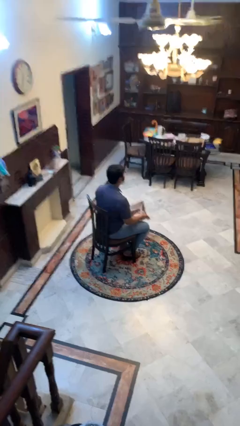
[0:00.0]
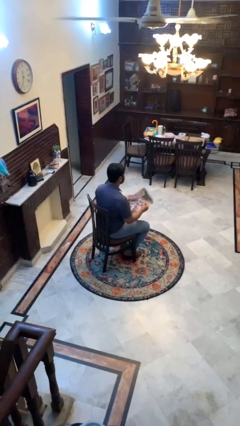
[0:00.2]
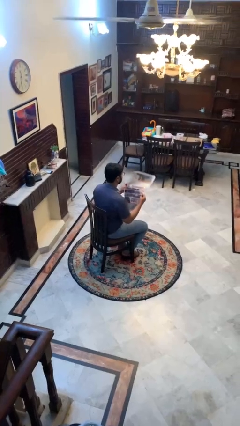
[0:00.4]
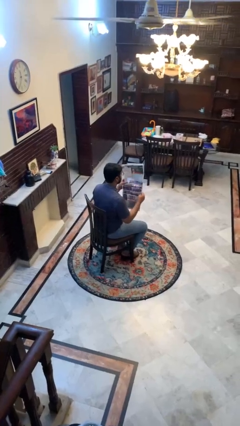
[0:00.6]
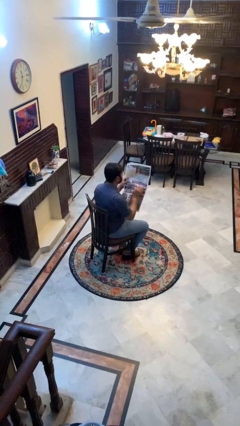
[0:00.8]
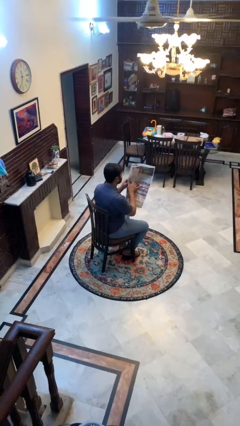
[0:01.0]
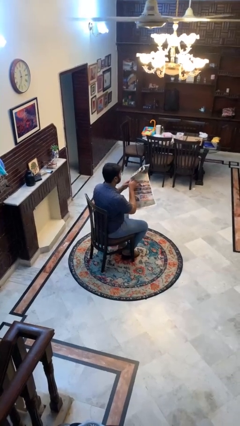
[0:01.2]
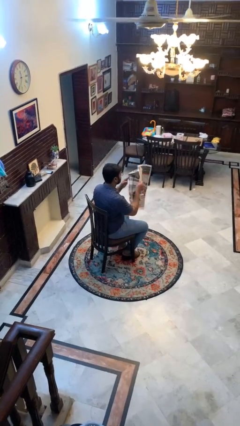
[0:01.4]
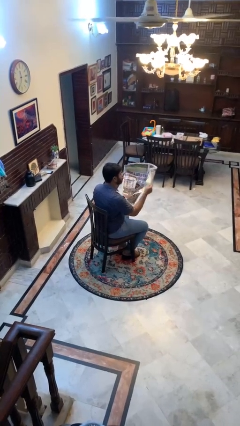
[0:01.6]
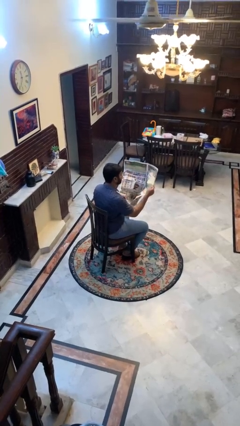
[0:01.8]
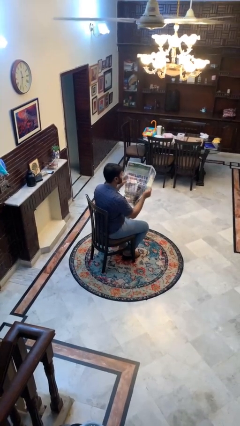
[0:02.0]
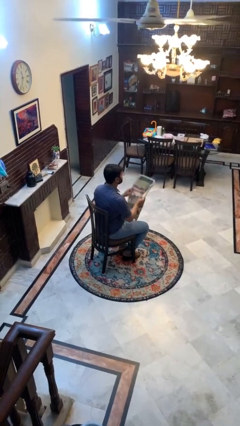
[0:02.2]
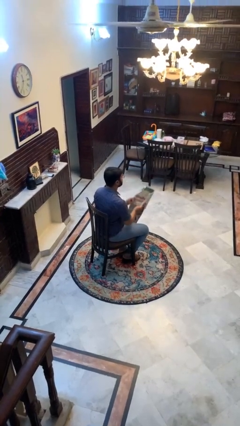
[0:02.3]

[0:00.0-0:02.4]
person reads newspaper

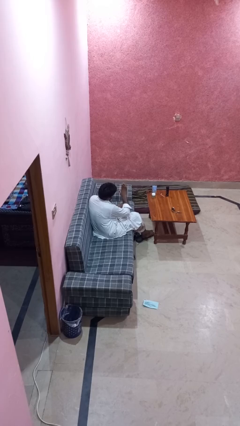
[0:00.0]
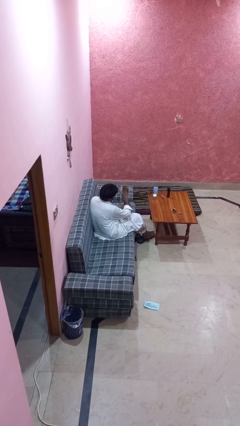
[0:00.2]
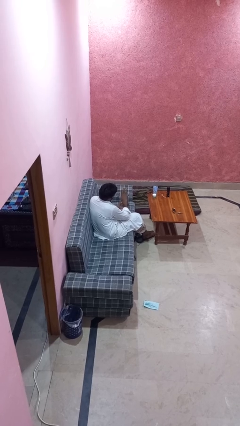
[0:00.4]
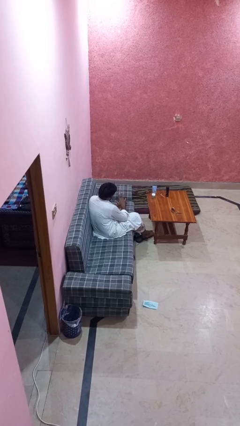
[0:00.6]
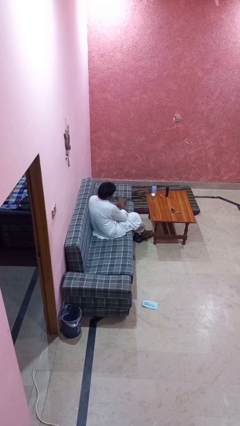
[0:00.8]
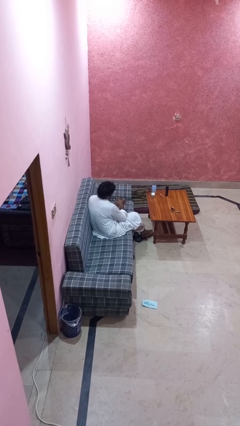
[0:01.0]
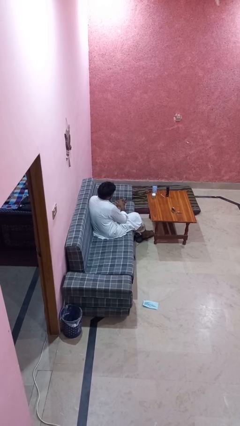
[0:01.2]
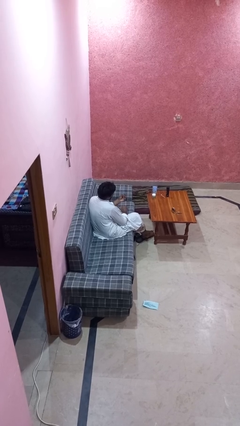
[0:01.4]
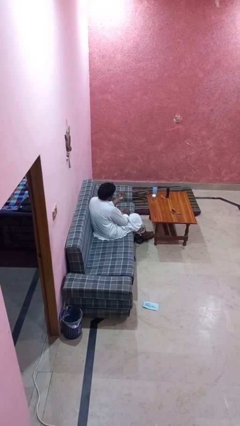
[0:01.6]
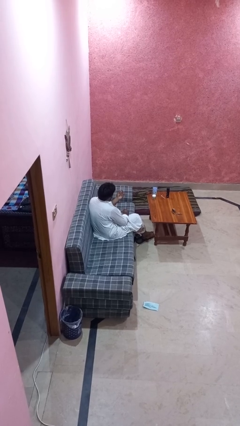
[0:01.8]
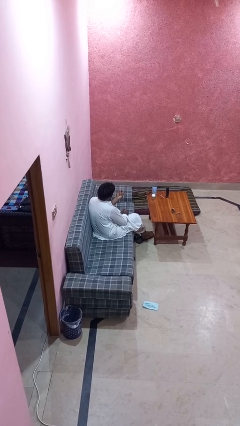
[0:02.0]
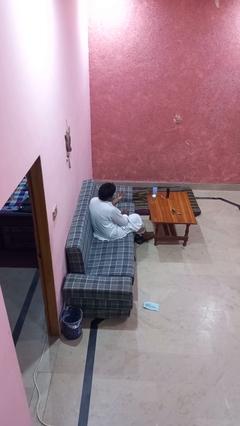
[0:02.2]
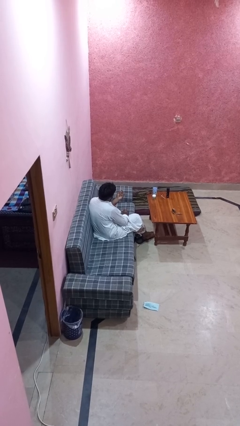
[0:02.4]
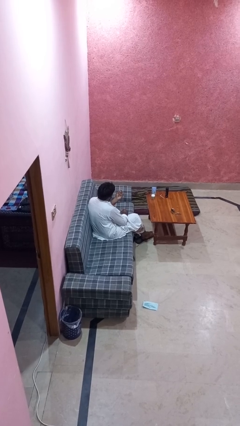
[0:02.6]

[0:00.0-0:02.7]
person takes off ring

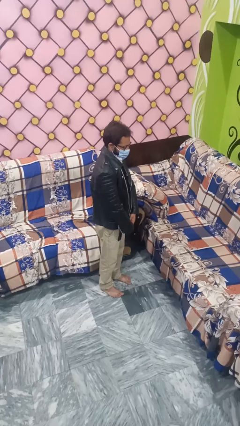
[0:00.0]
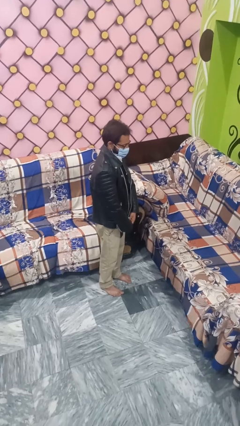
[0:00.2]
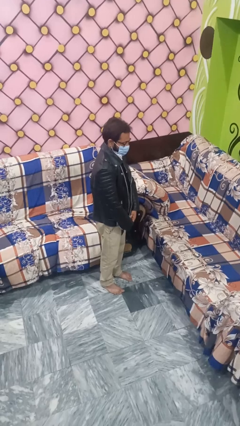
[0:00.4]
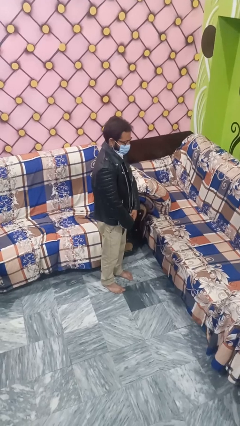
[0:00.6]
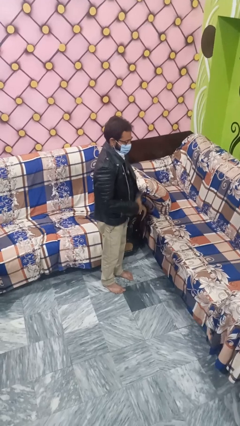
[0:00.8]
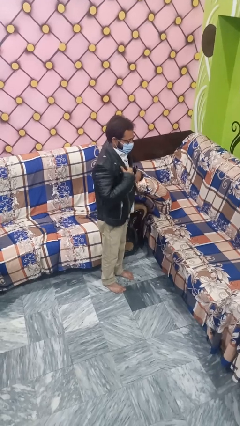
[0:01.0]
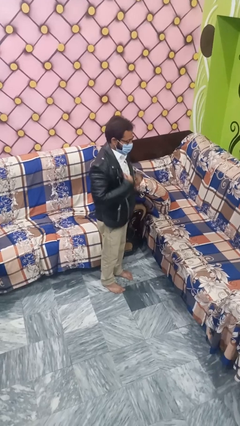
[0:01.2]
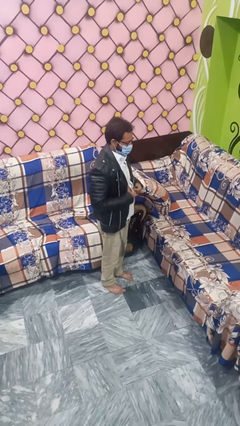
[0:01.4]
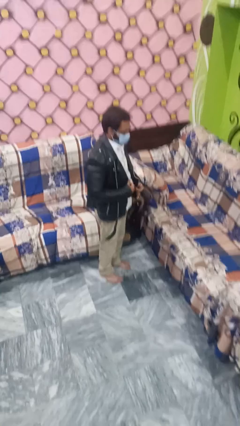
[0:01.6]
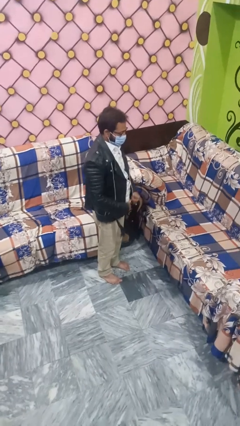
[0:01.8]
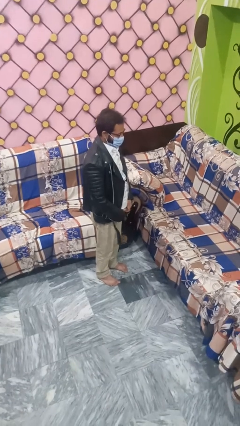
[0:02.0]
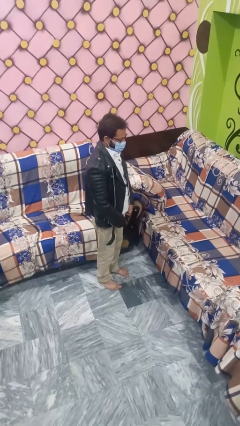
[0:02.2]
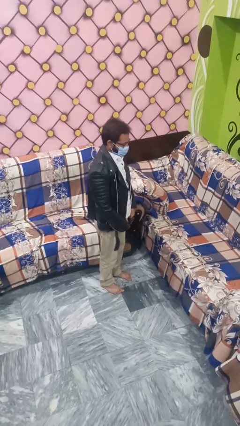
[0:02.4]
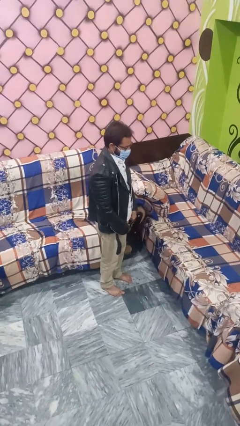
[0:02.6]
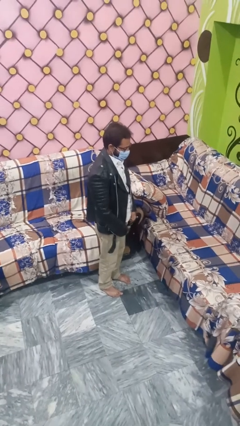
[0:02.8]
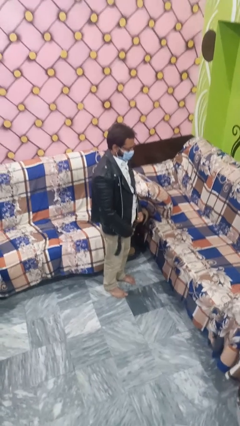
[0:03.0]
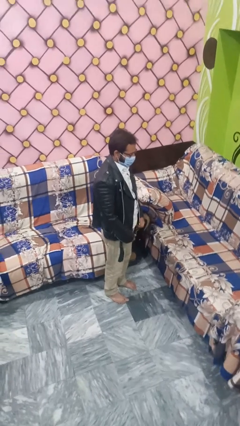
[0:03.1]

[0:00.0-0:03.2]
person unzips jacket

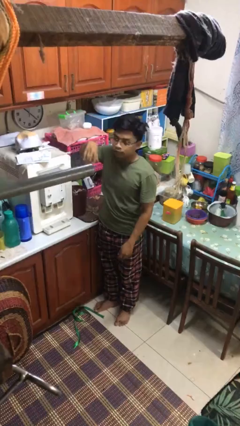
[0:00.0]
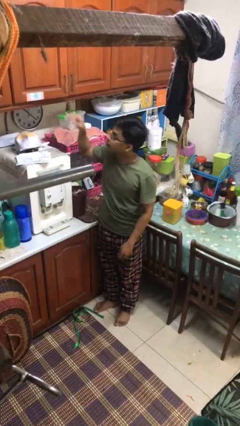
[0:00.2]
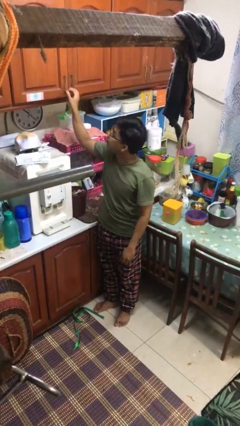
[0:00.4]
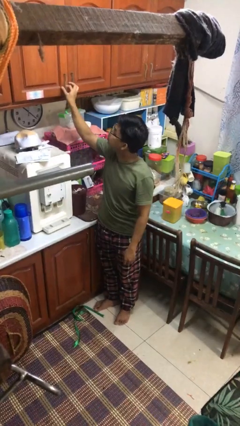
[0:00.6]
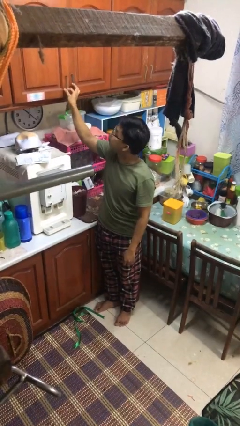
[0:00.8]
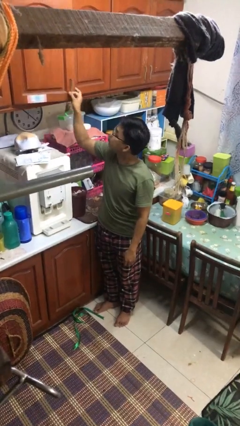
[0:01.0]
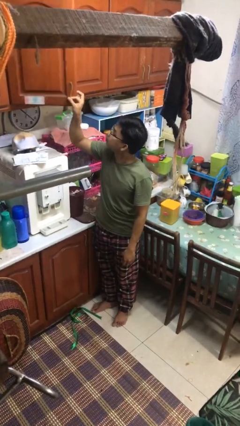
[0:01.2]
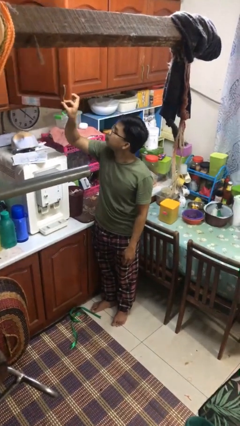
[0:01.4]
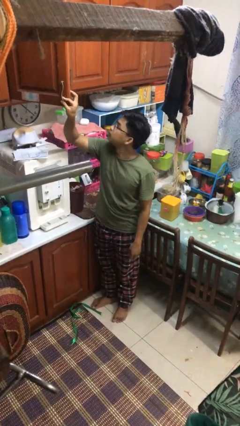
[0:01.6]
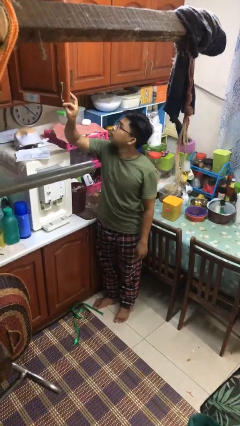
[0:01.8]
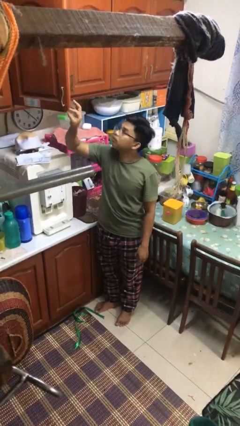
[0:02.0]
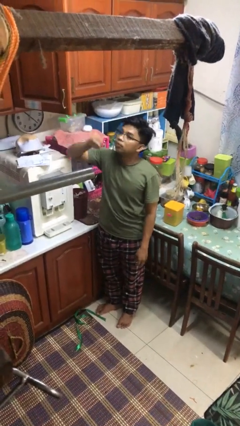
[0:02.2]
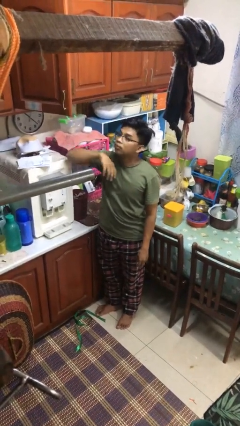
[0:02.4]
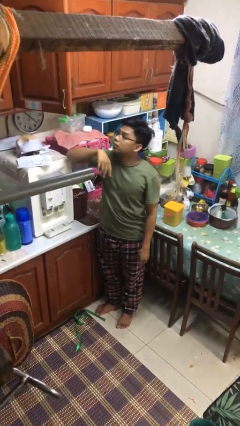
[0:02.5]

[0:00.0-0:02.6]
person opens kitchen drawer

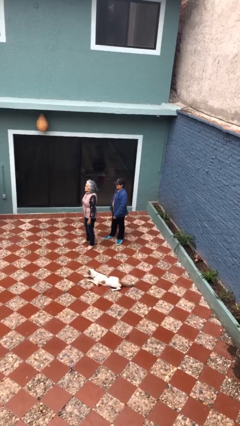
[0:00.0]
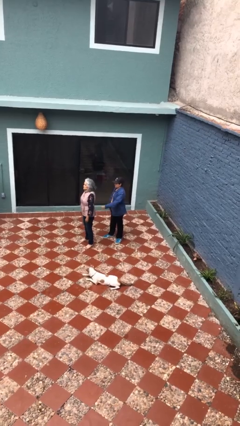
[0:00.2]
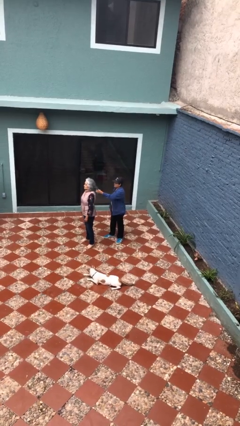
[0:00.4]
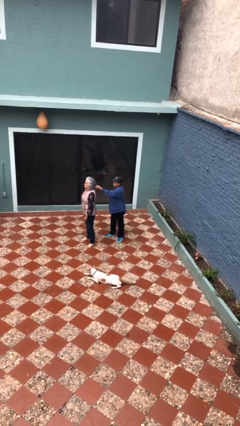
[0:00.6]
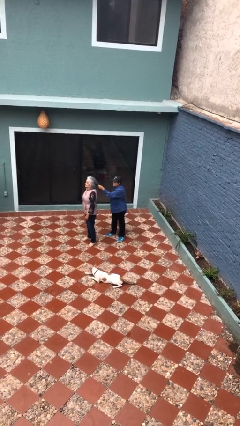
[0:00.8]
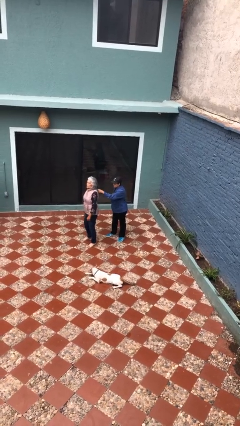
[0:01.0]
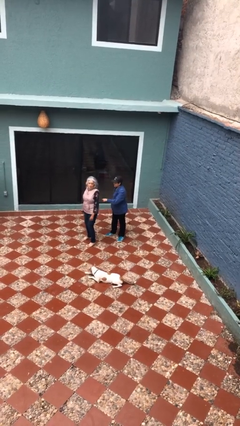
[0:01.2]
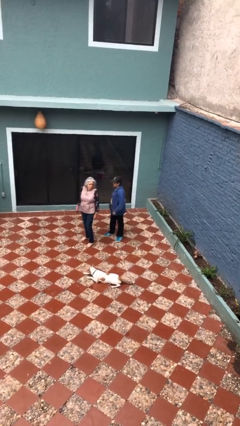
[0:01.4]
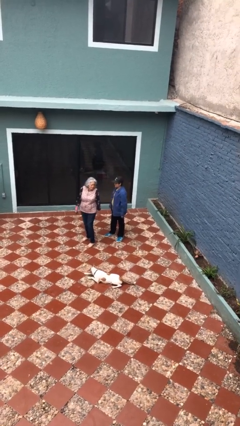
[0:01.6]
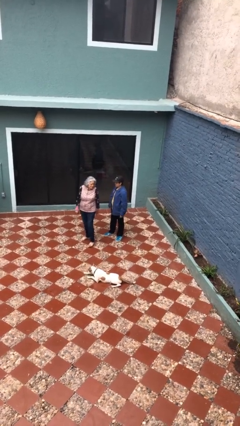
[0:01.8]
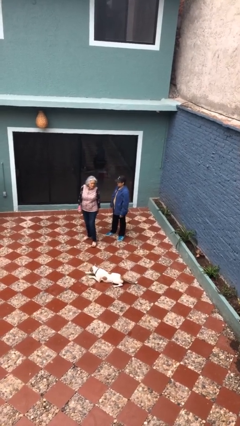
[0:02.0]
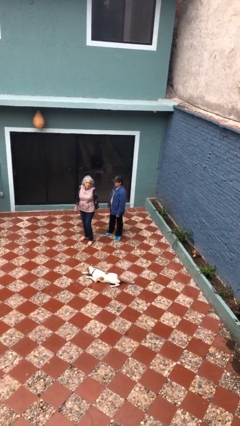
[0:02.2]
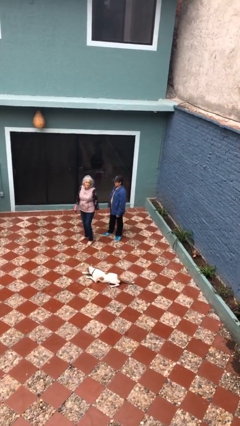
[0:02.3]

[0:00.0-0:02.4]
person grabs person by hair

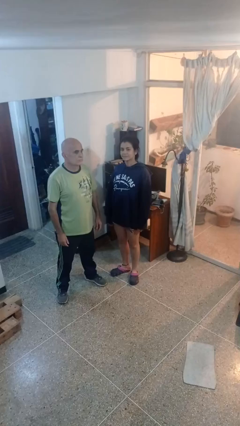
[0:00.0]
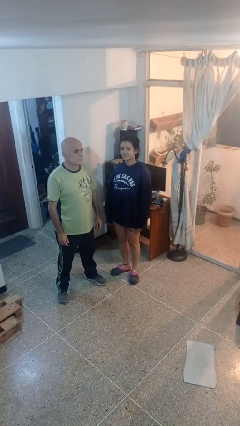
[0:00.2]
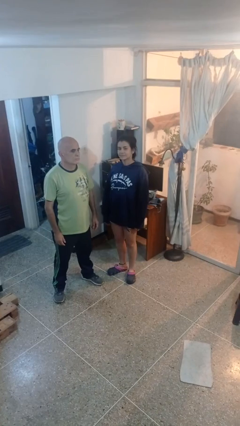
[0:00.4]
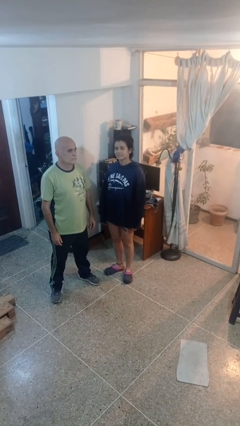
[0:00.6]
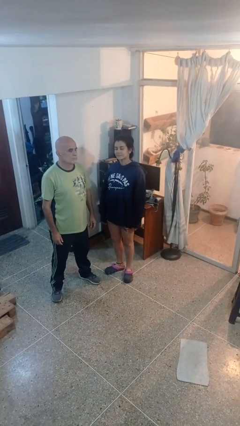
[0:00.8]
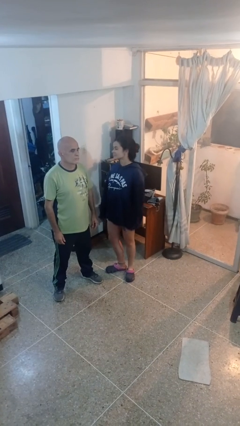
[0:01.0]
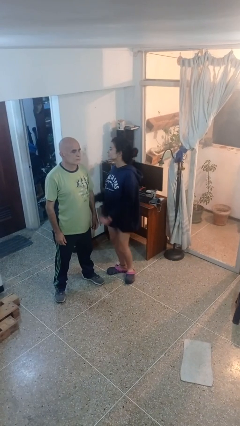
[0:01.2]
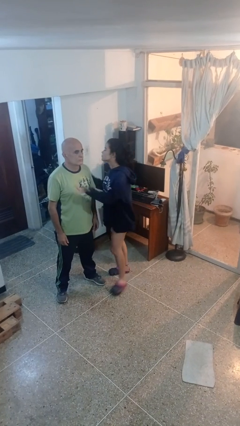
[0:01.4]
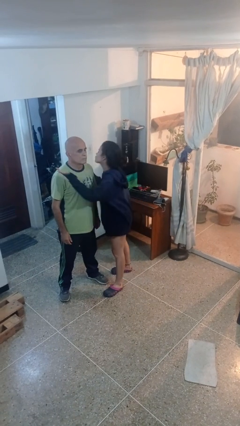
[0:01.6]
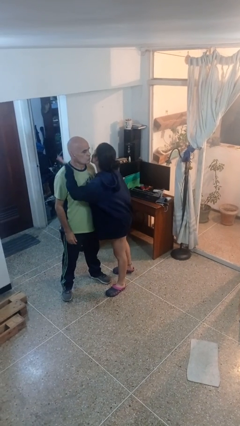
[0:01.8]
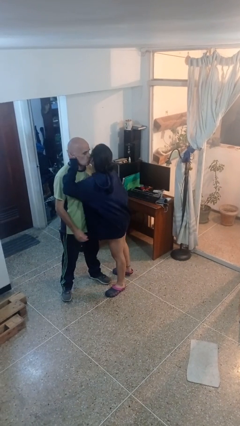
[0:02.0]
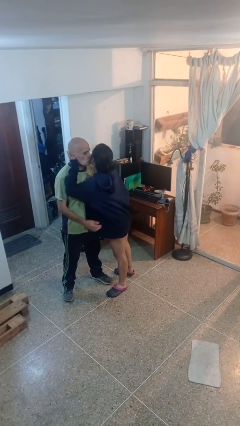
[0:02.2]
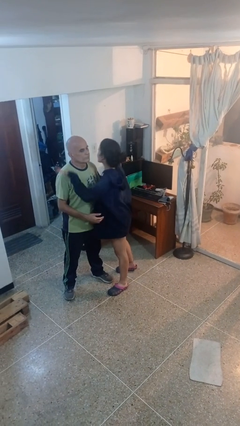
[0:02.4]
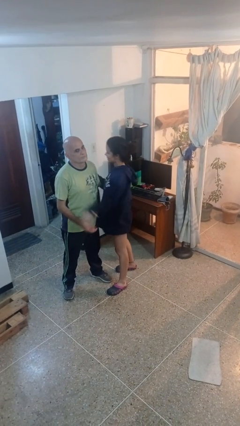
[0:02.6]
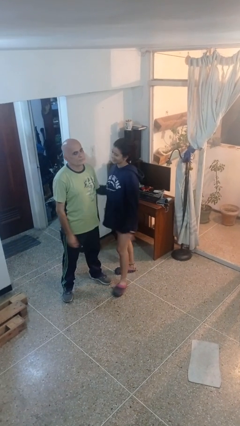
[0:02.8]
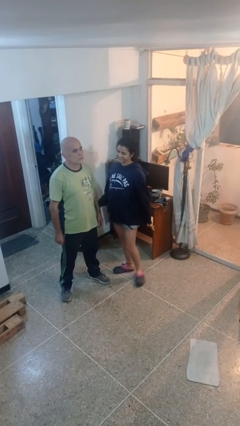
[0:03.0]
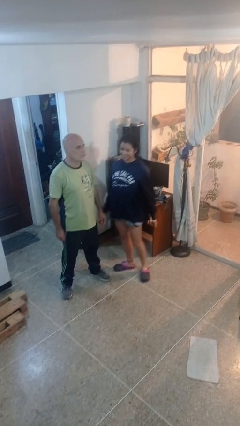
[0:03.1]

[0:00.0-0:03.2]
person kisses cheek of person

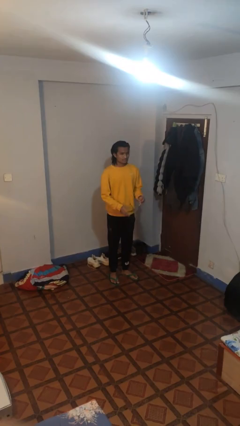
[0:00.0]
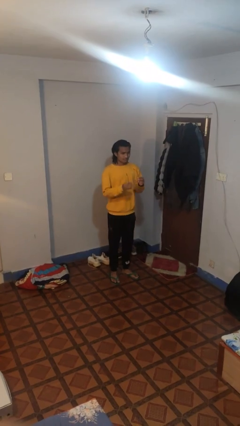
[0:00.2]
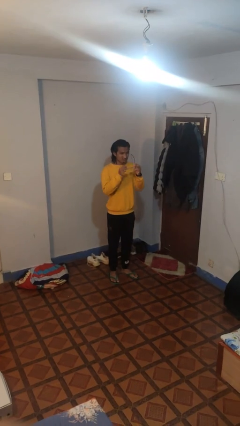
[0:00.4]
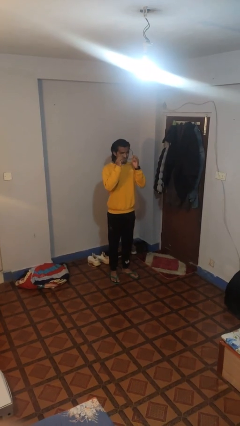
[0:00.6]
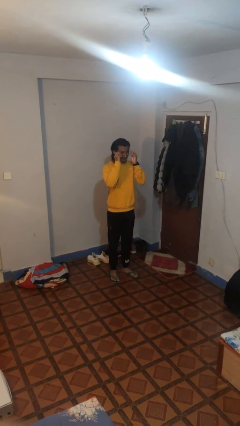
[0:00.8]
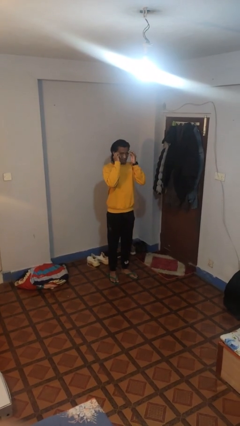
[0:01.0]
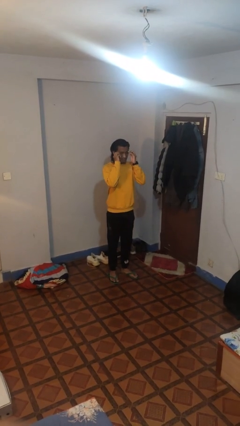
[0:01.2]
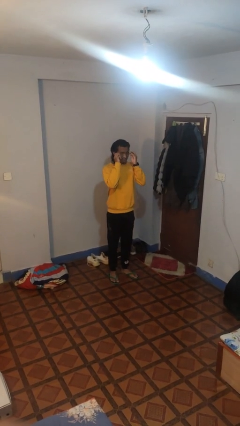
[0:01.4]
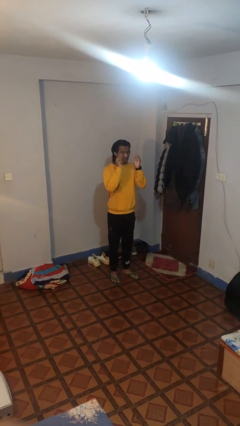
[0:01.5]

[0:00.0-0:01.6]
person puts on glasses
